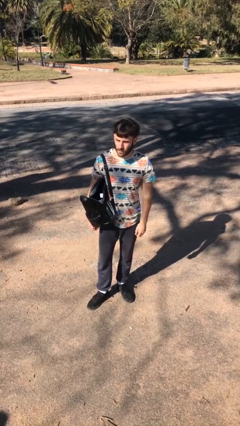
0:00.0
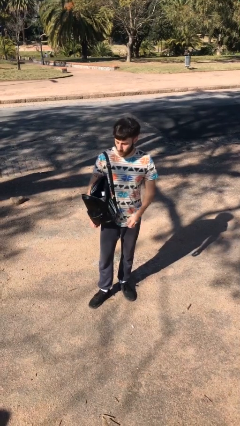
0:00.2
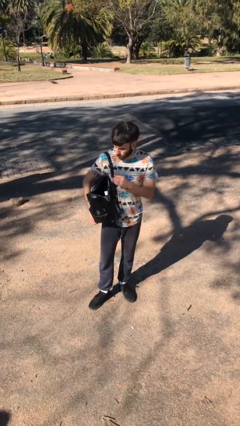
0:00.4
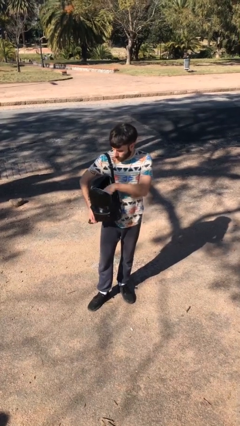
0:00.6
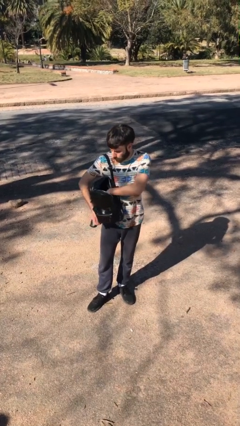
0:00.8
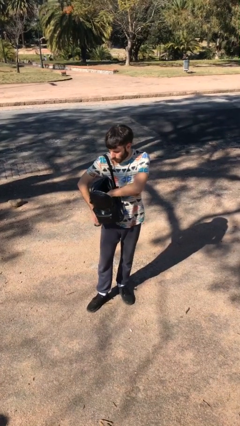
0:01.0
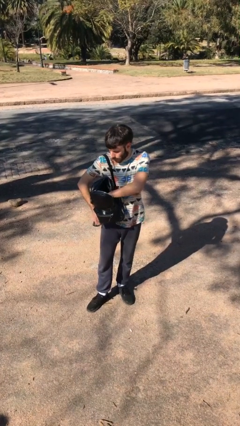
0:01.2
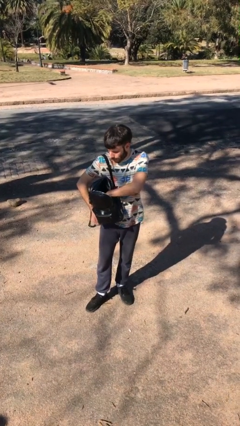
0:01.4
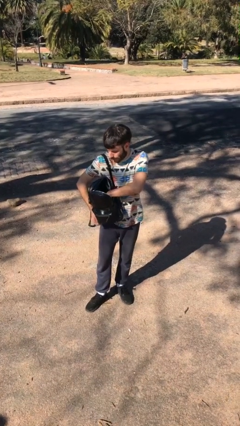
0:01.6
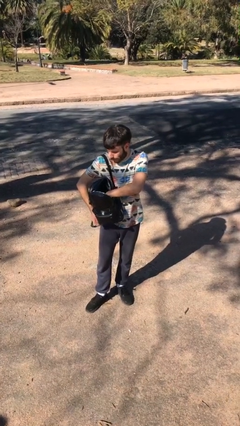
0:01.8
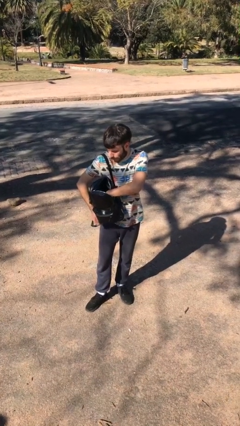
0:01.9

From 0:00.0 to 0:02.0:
person searches in backpack

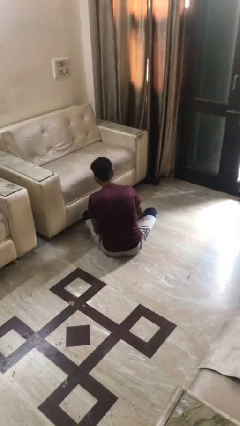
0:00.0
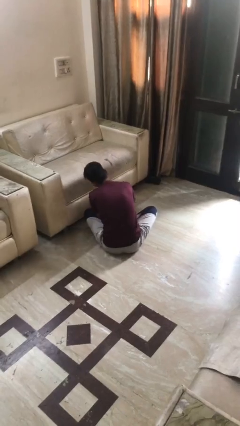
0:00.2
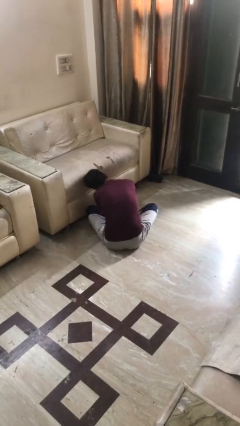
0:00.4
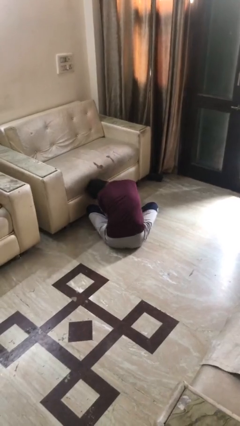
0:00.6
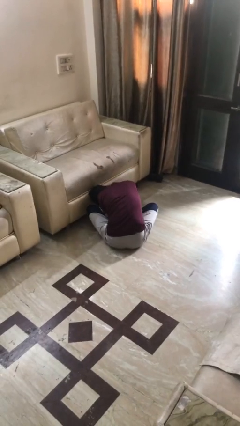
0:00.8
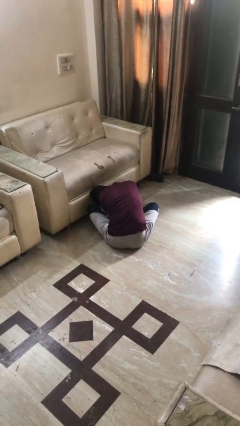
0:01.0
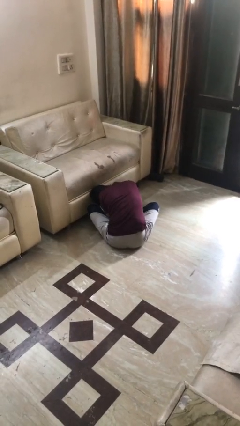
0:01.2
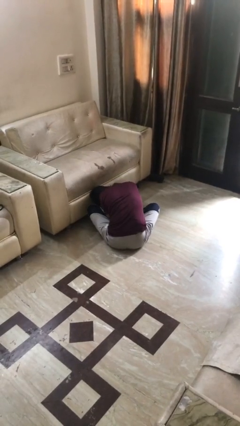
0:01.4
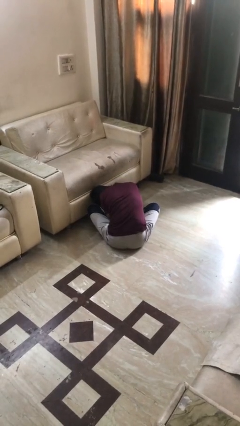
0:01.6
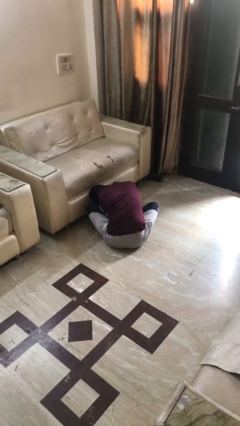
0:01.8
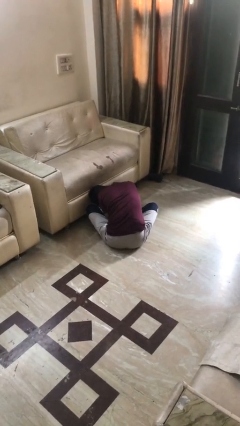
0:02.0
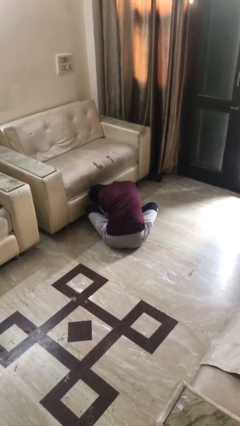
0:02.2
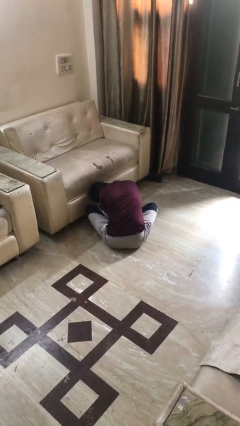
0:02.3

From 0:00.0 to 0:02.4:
person searches under couch

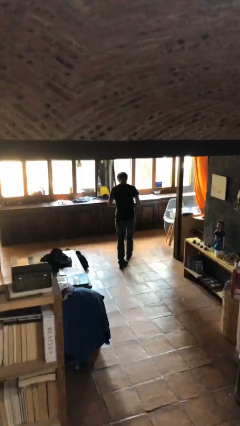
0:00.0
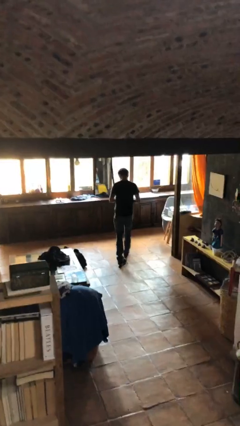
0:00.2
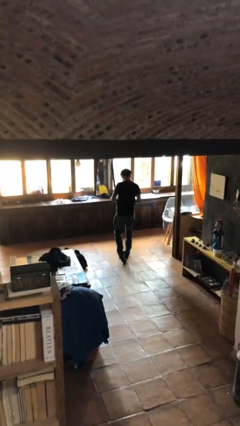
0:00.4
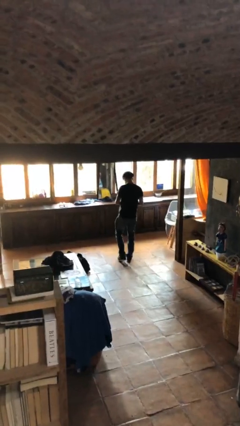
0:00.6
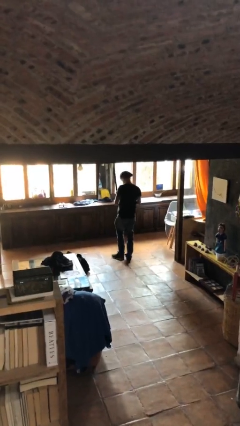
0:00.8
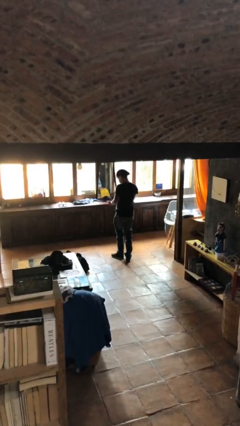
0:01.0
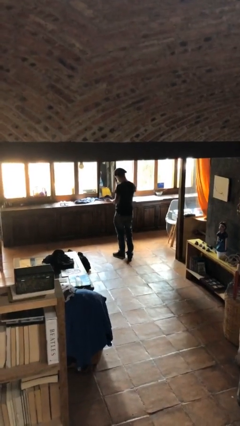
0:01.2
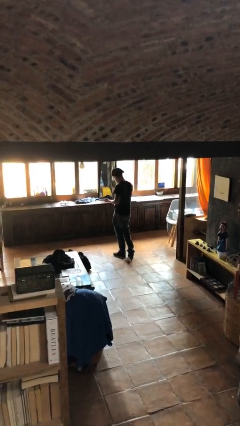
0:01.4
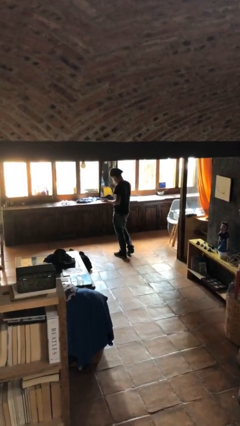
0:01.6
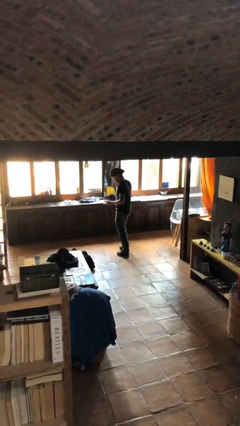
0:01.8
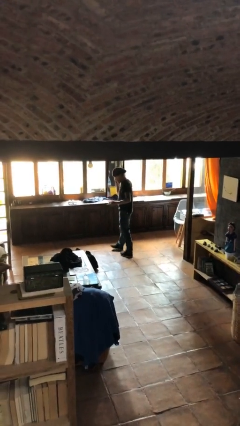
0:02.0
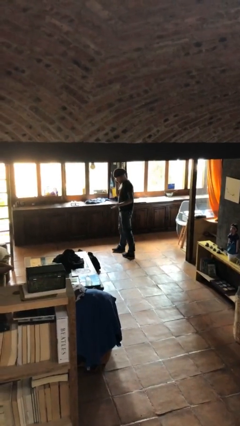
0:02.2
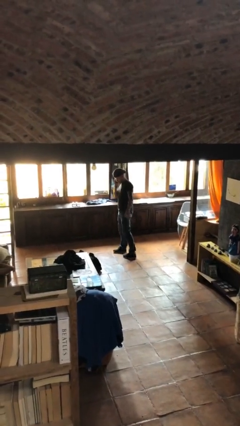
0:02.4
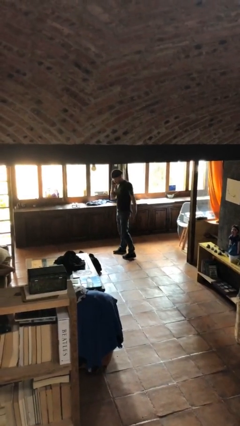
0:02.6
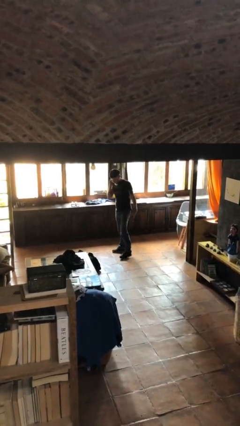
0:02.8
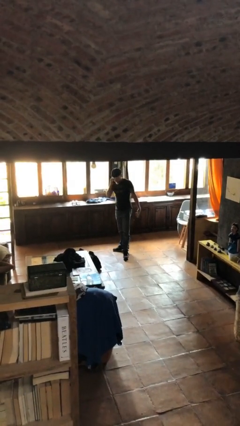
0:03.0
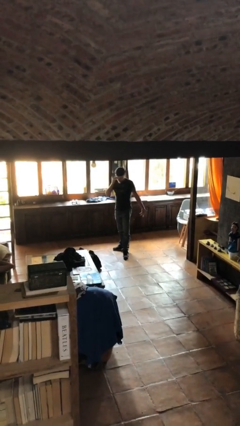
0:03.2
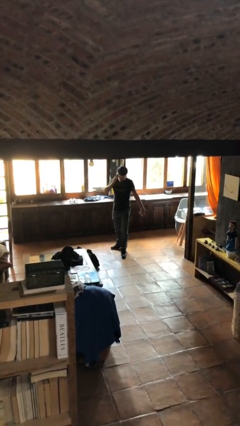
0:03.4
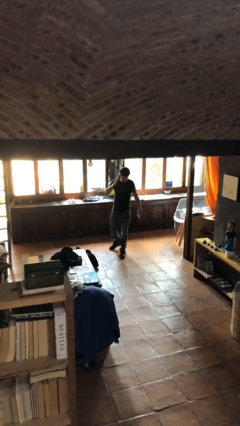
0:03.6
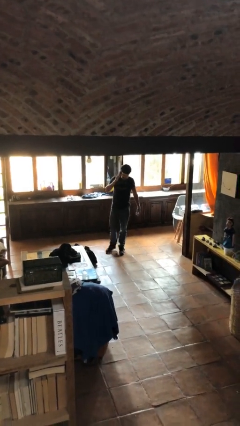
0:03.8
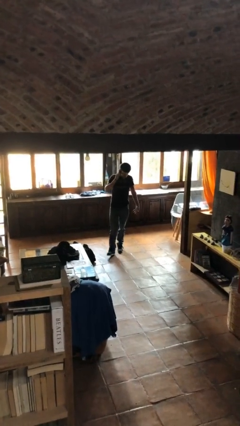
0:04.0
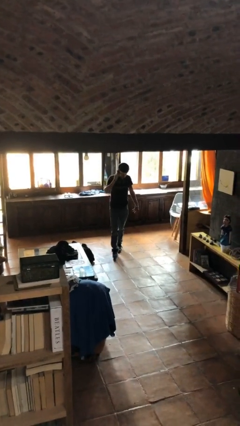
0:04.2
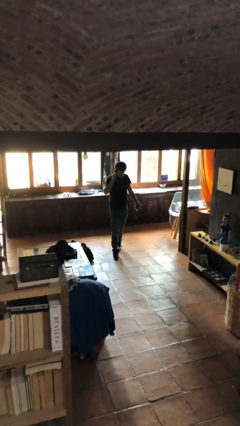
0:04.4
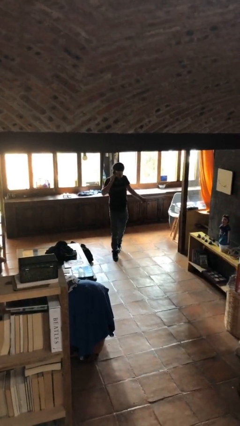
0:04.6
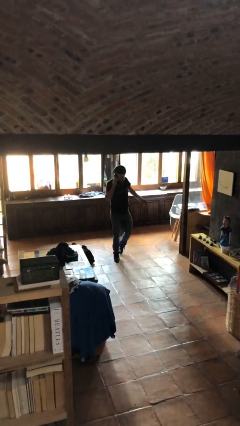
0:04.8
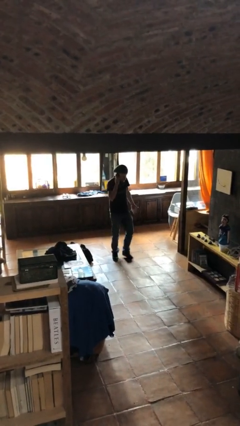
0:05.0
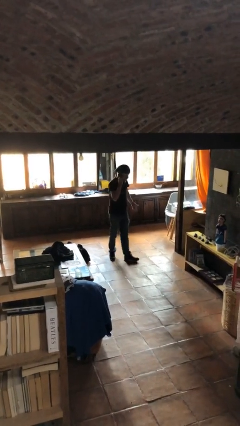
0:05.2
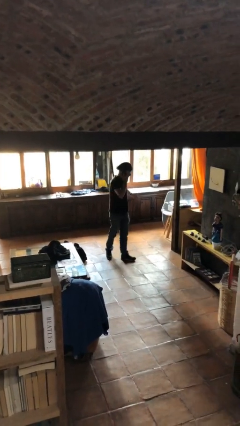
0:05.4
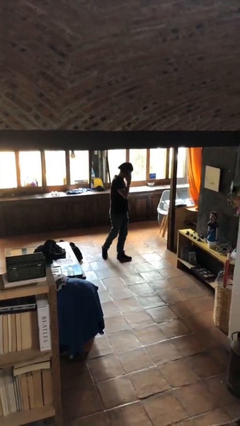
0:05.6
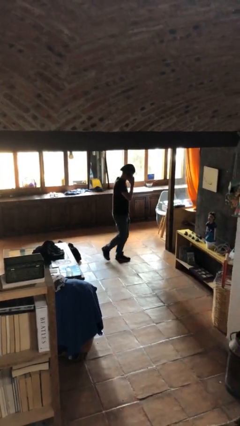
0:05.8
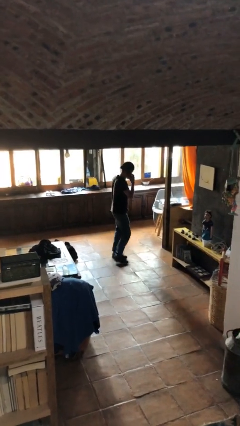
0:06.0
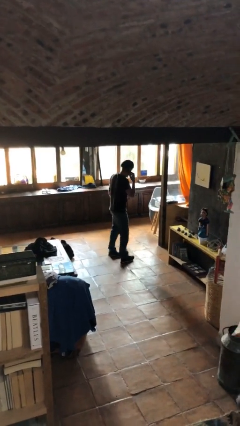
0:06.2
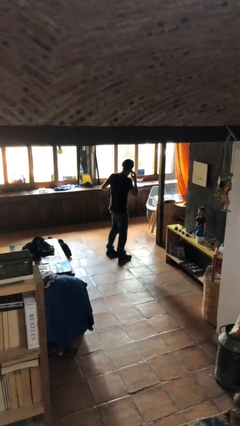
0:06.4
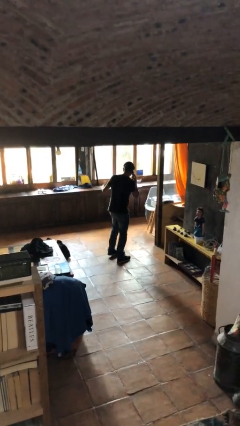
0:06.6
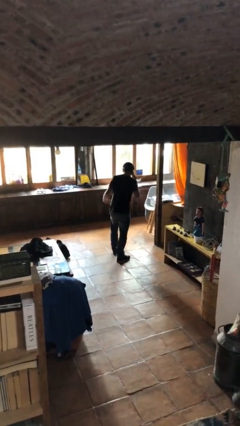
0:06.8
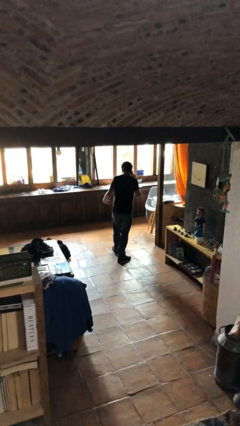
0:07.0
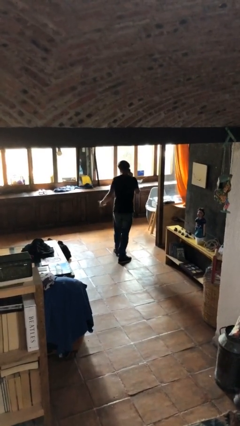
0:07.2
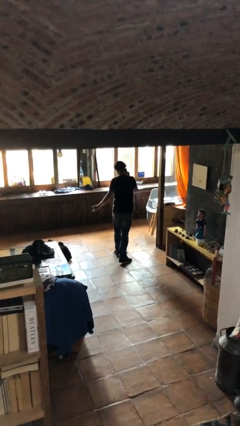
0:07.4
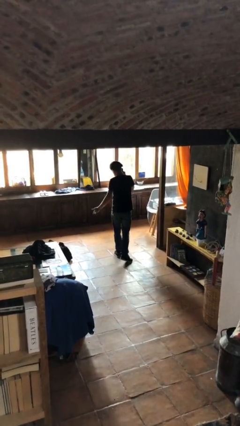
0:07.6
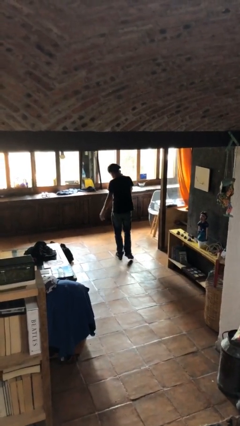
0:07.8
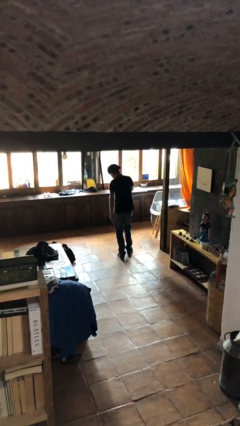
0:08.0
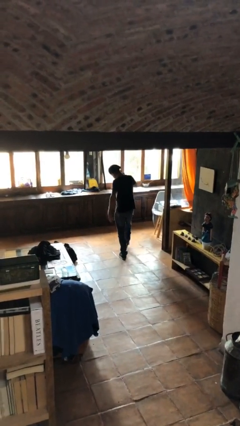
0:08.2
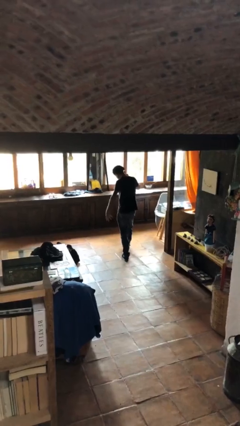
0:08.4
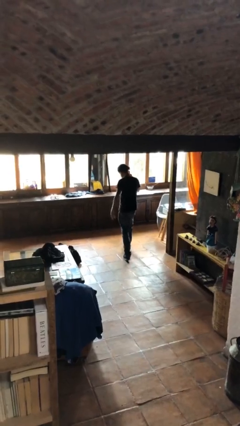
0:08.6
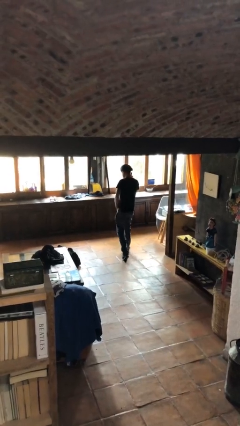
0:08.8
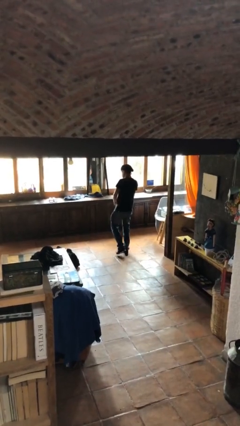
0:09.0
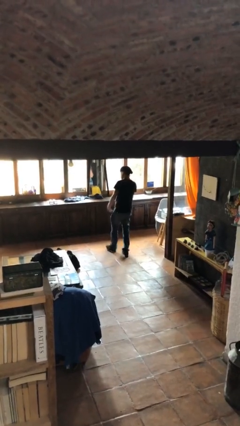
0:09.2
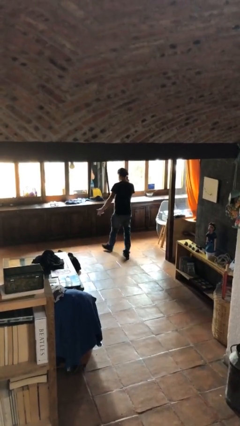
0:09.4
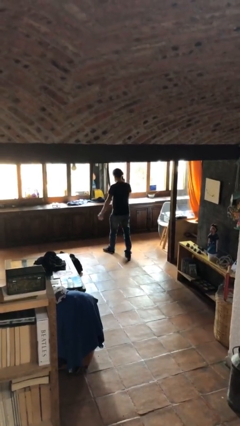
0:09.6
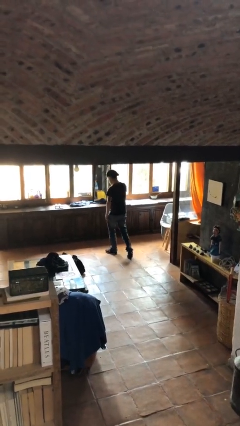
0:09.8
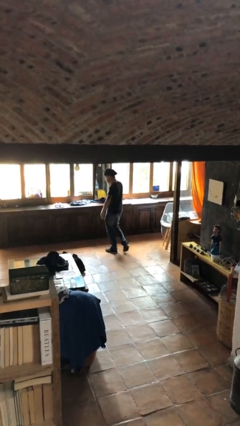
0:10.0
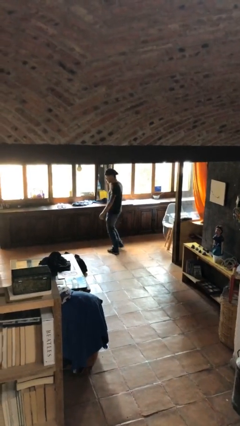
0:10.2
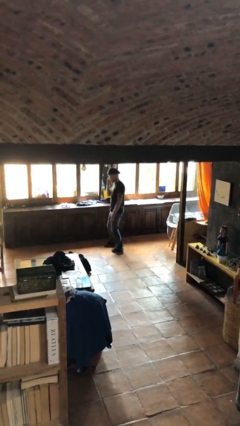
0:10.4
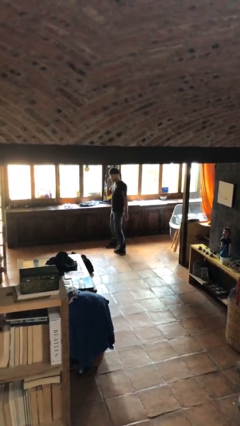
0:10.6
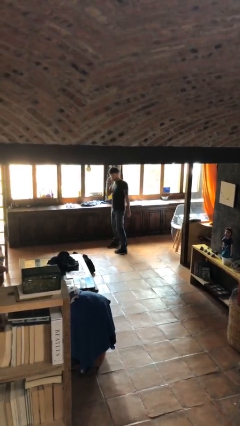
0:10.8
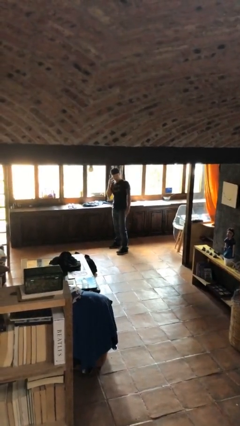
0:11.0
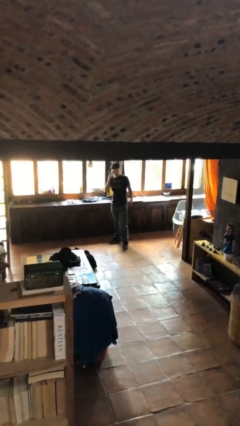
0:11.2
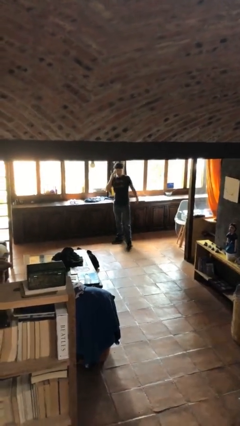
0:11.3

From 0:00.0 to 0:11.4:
person talks on phone

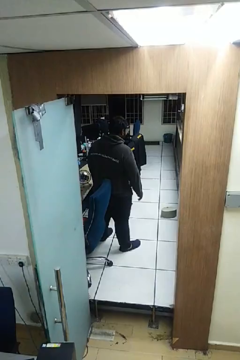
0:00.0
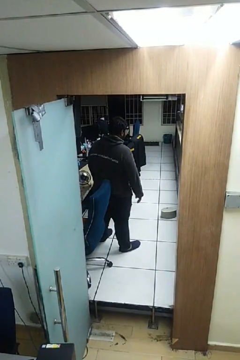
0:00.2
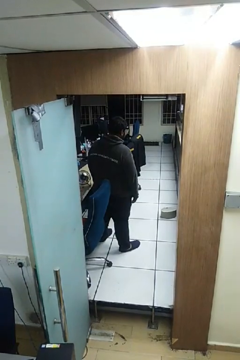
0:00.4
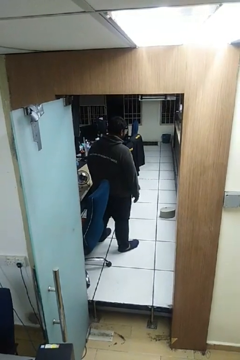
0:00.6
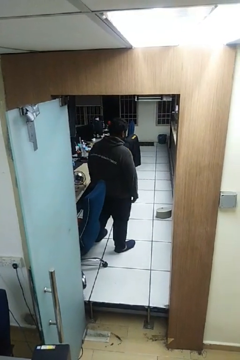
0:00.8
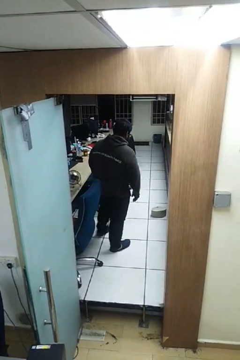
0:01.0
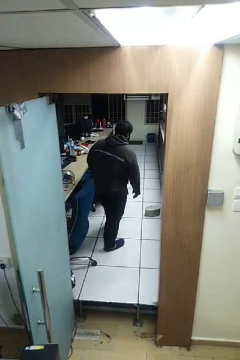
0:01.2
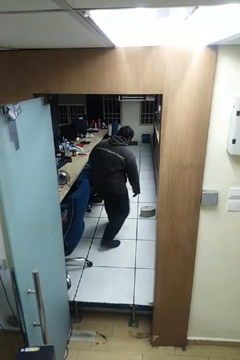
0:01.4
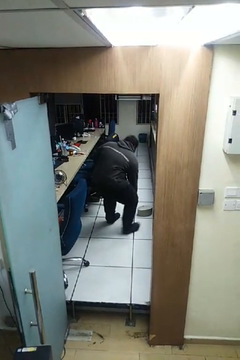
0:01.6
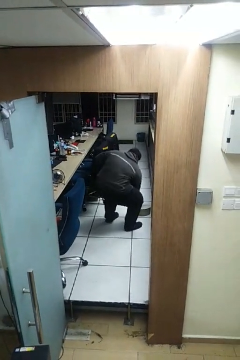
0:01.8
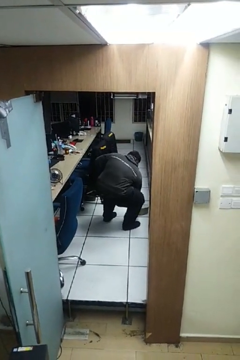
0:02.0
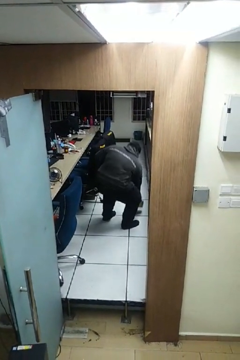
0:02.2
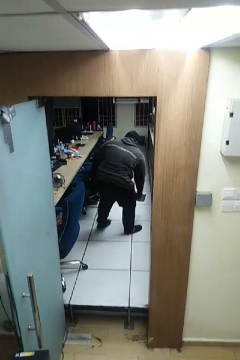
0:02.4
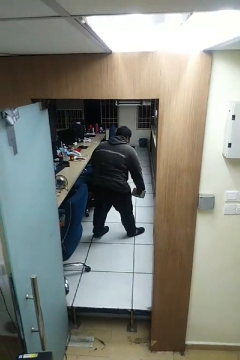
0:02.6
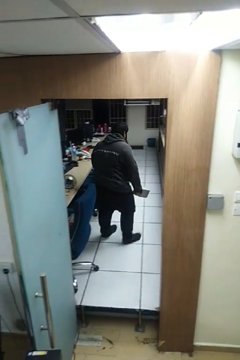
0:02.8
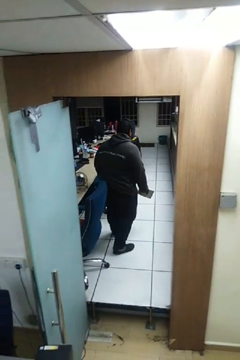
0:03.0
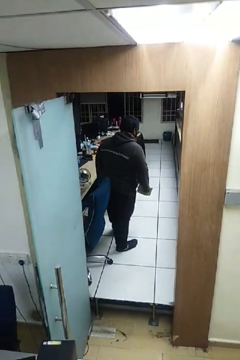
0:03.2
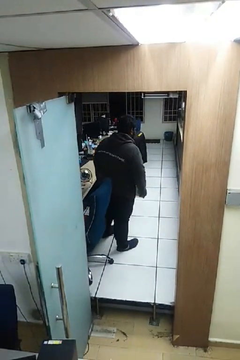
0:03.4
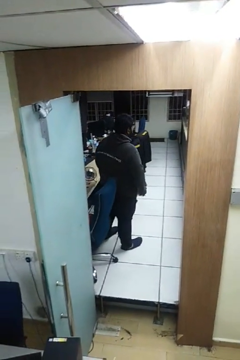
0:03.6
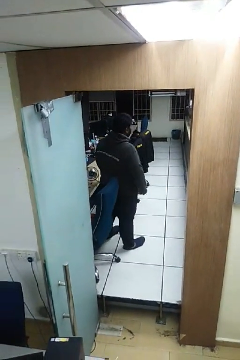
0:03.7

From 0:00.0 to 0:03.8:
person picks up object from floor
